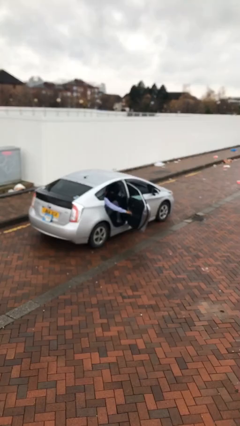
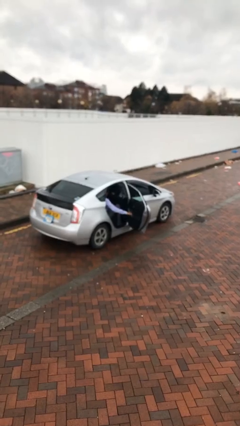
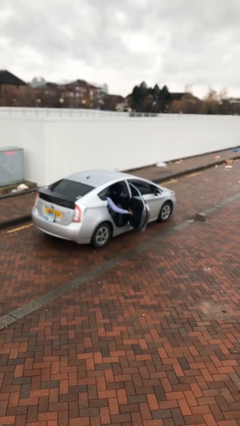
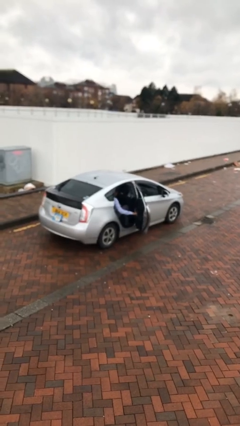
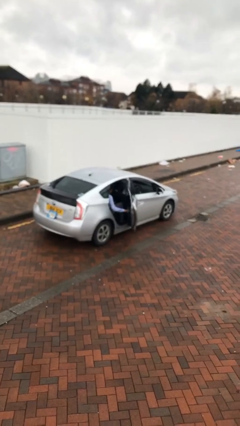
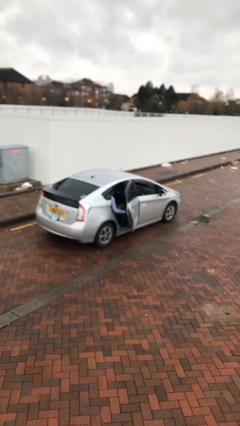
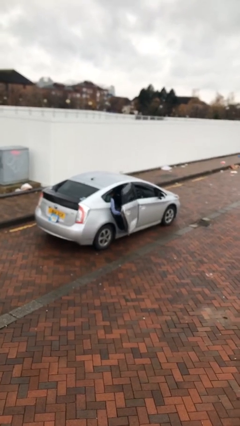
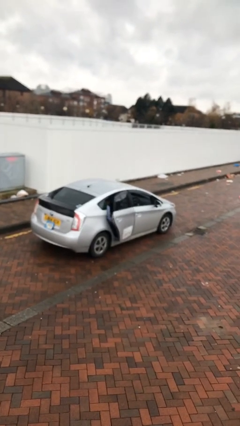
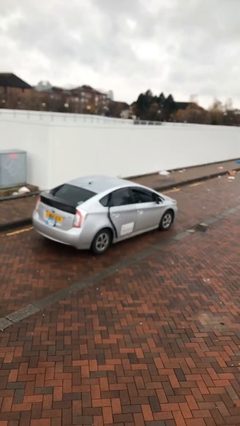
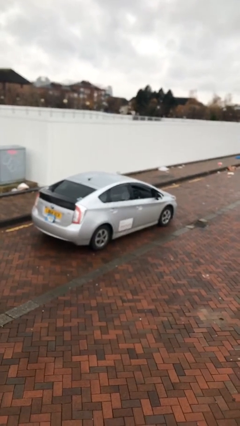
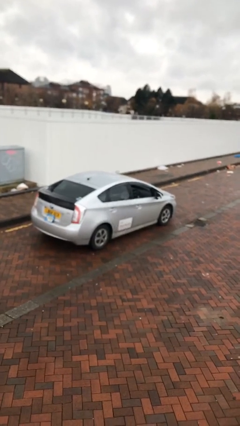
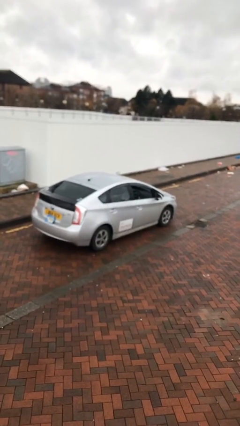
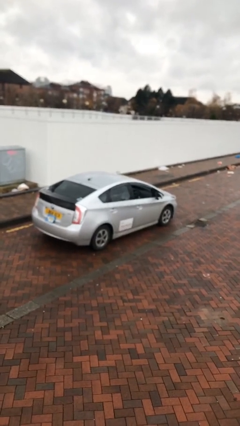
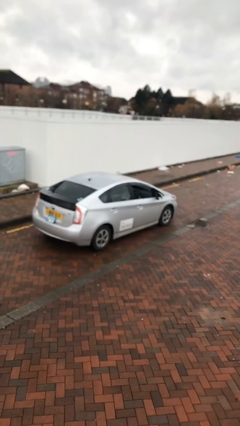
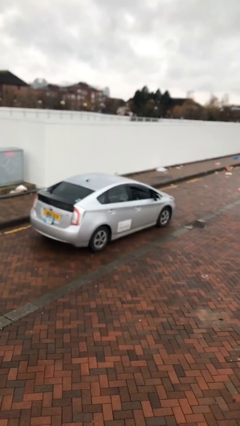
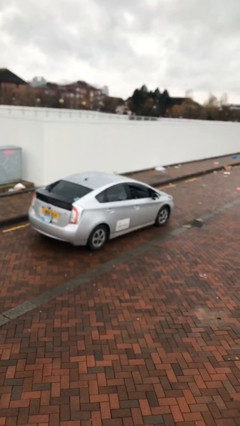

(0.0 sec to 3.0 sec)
person closes car door

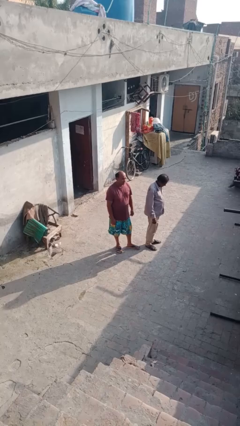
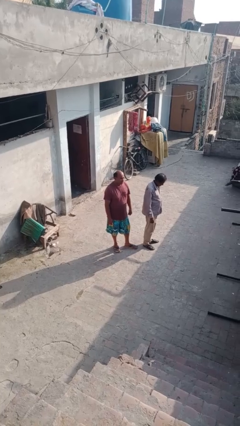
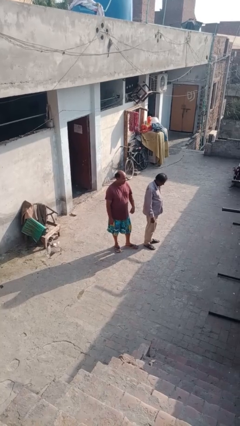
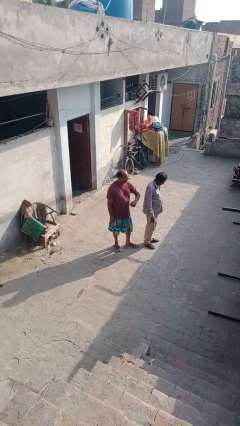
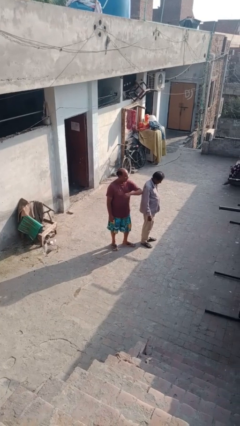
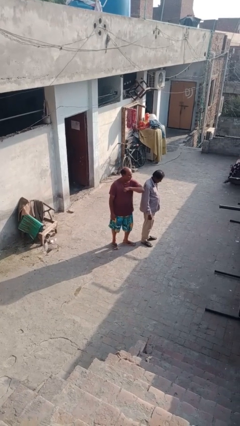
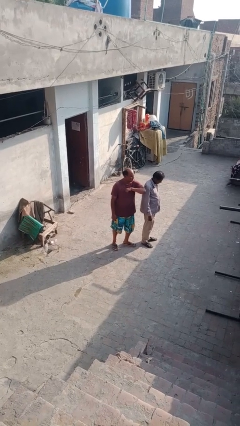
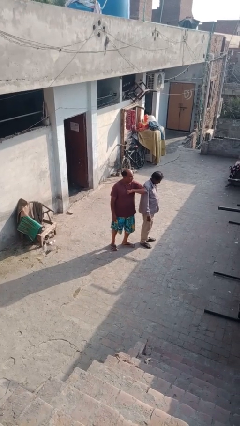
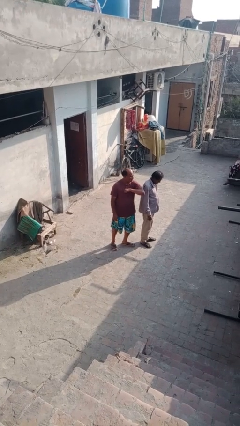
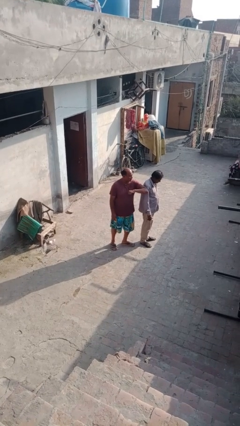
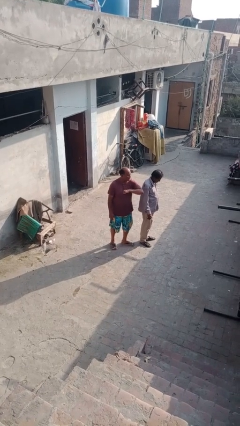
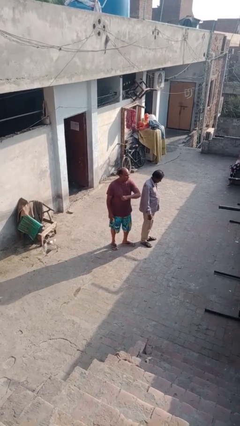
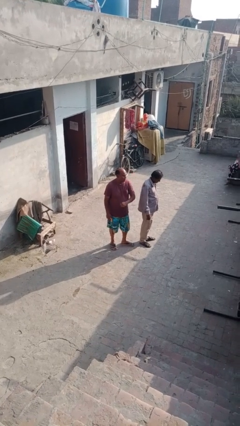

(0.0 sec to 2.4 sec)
person nudges person with elbow

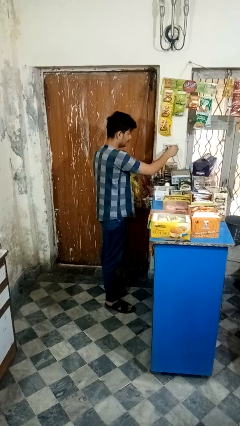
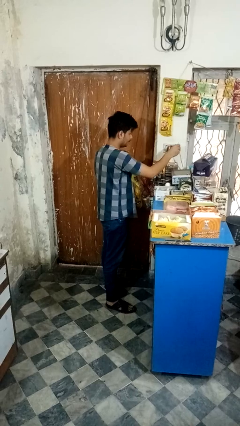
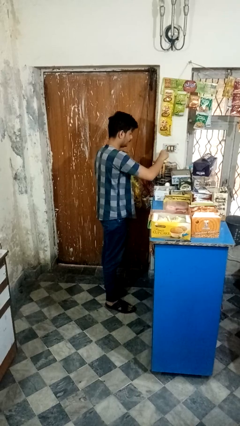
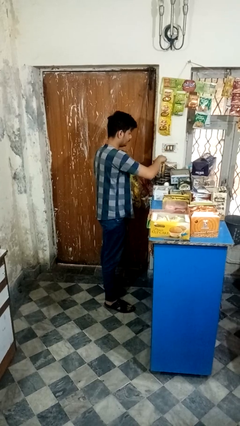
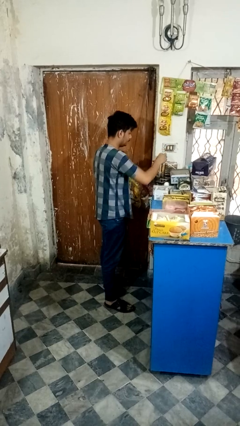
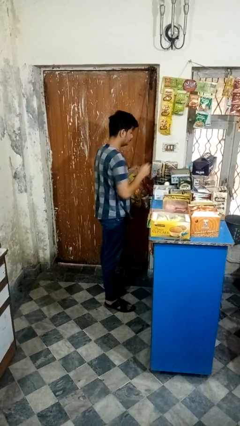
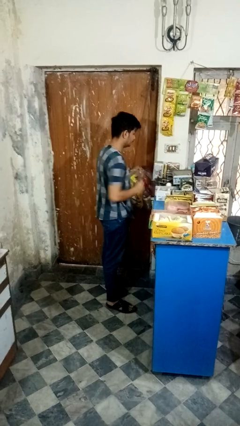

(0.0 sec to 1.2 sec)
person unplugs from electrical socket

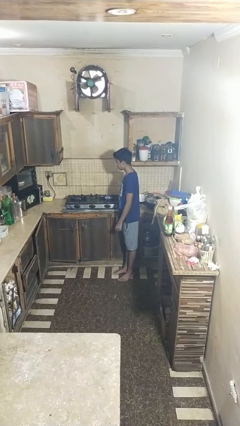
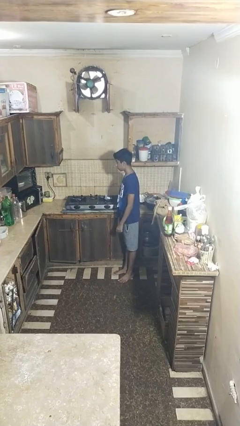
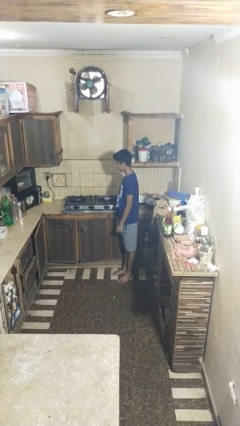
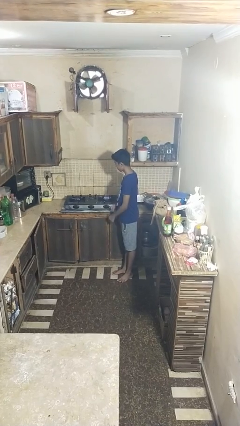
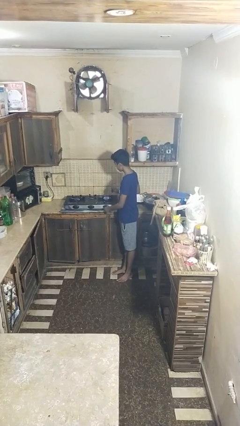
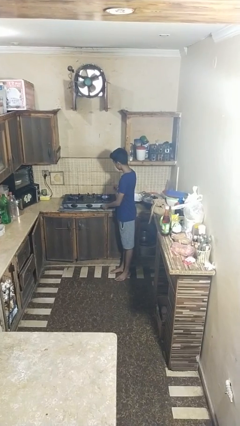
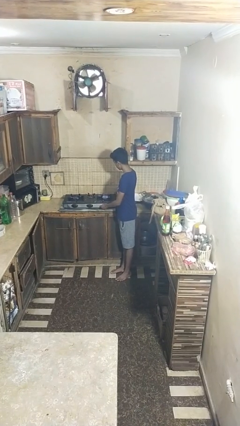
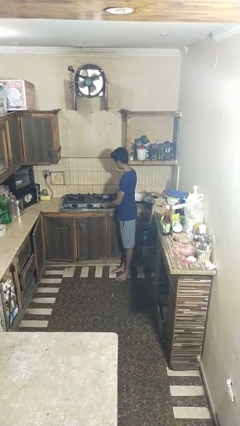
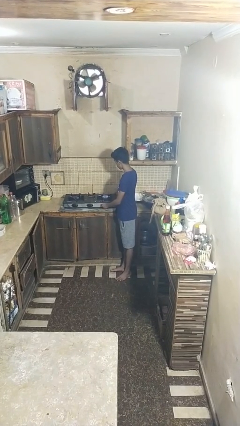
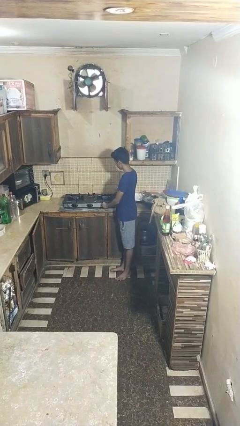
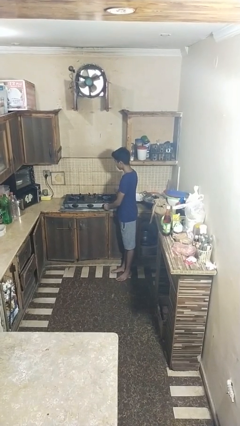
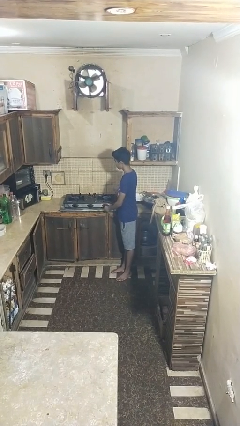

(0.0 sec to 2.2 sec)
person turns off stovetop

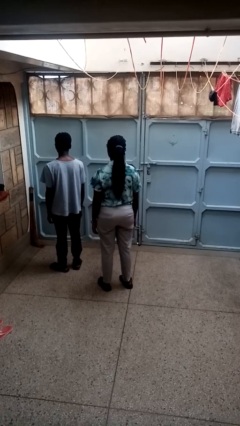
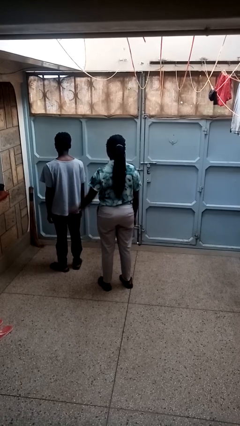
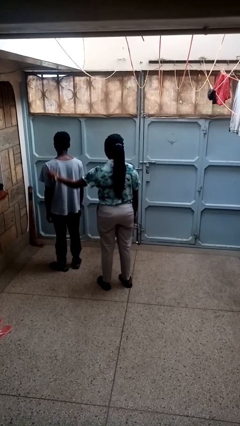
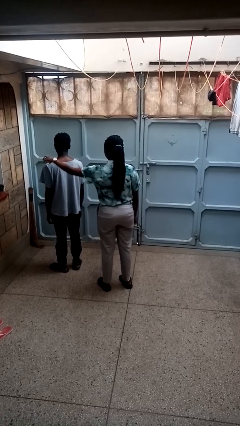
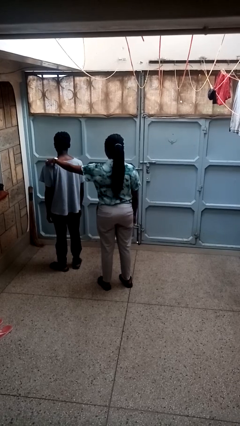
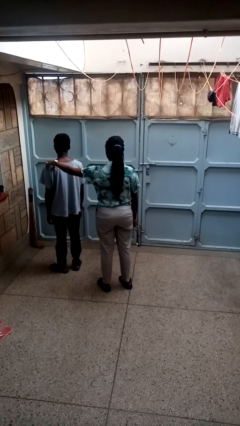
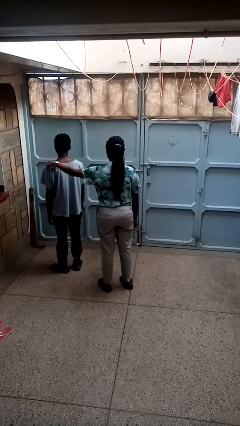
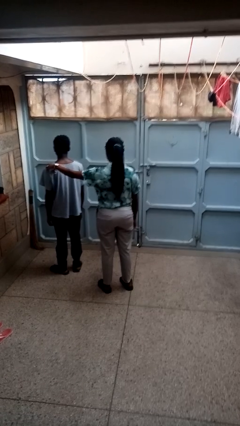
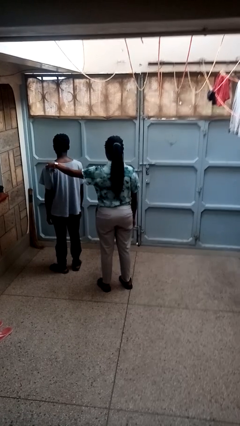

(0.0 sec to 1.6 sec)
person grabs person by shoulder

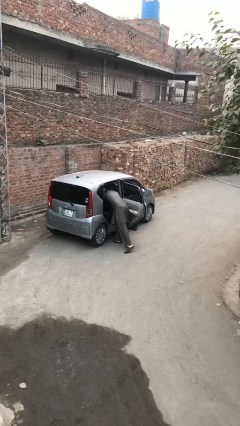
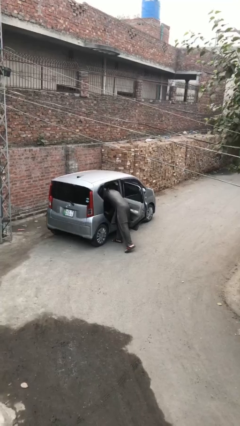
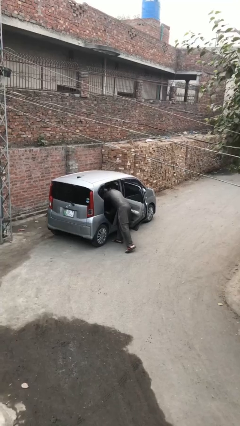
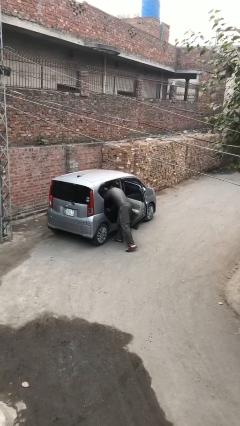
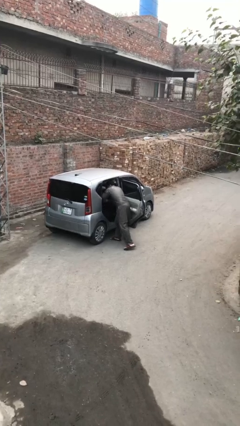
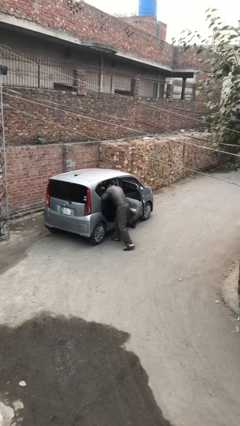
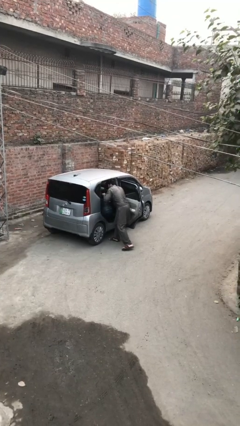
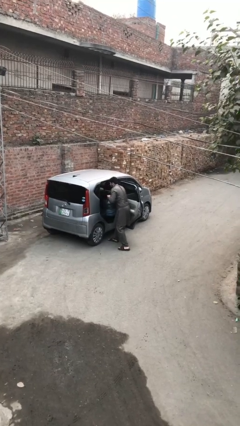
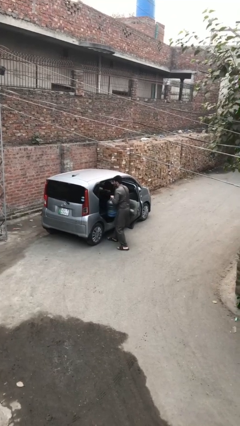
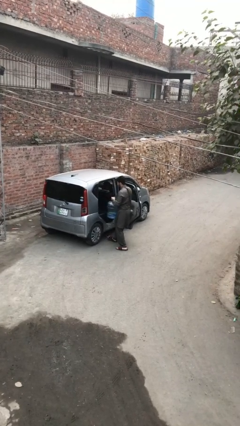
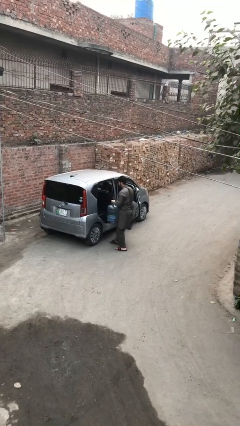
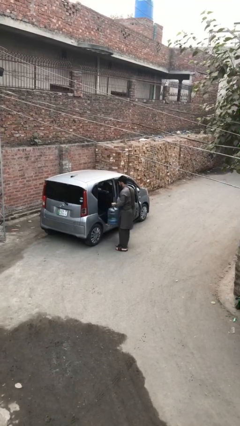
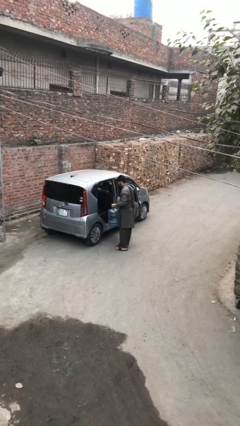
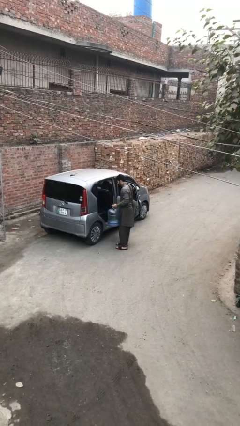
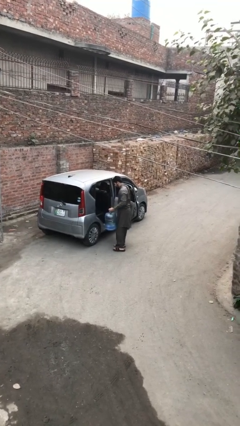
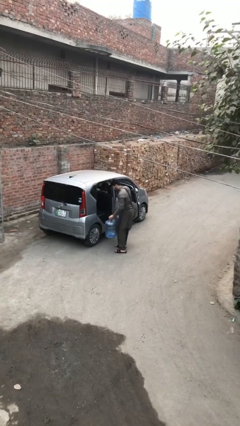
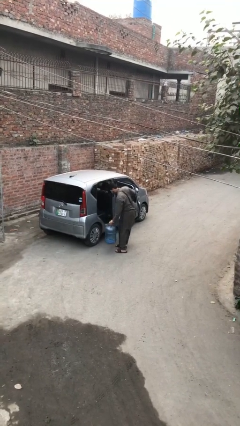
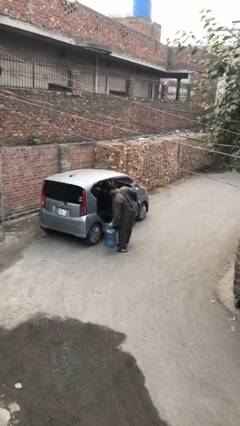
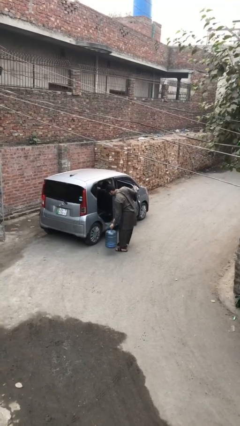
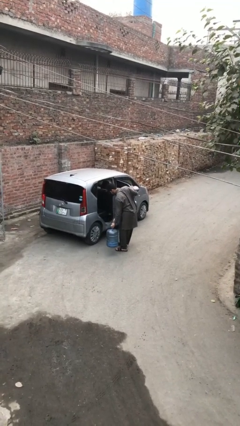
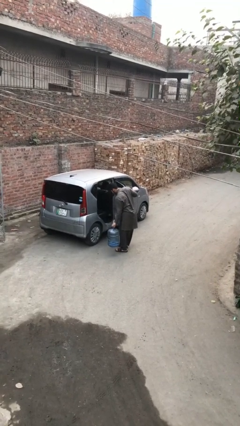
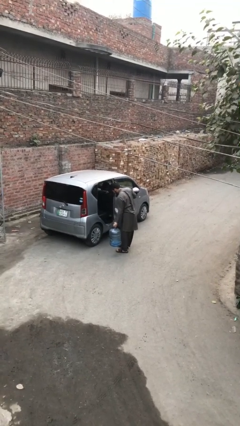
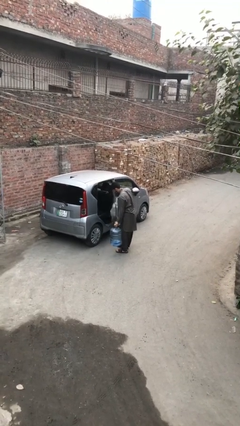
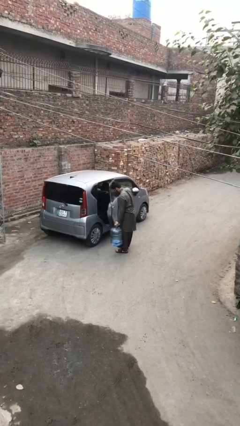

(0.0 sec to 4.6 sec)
person unloads car

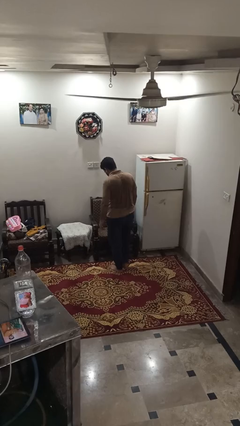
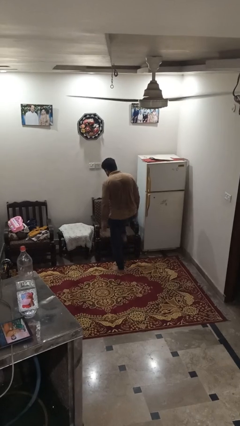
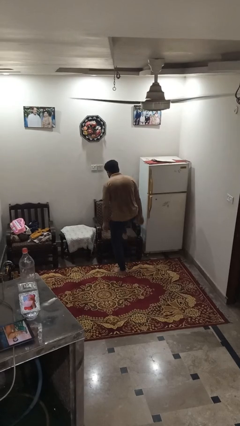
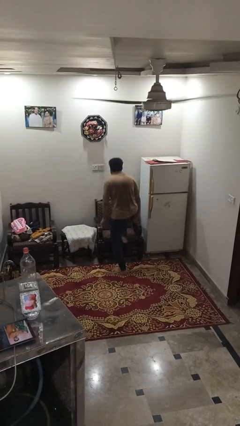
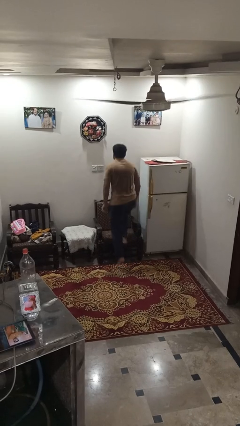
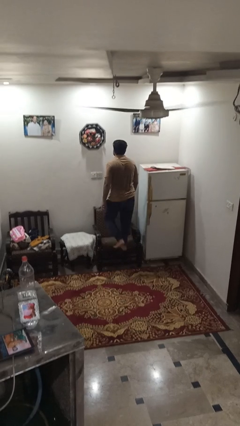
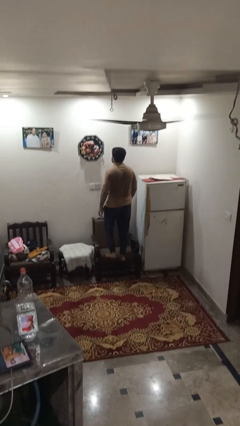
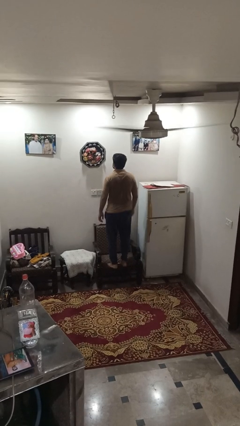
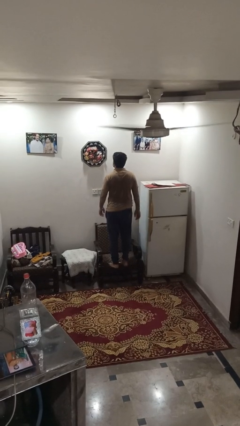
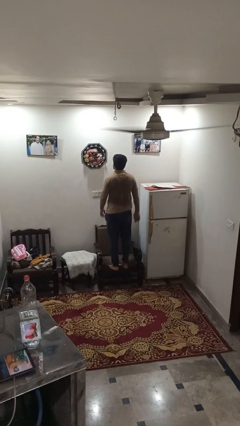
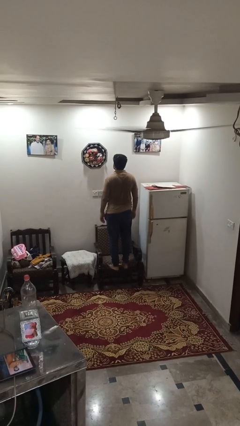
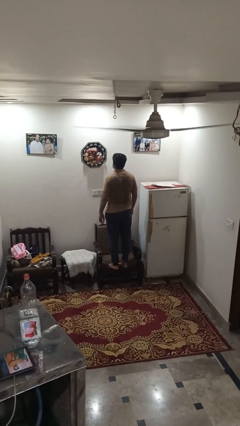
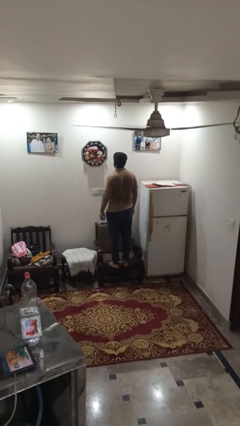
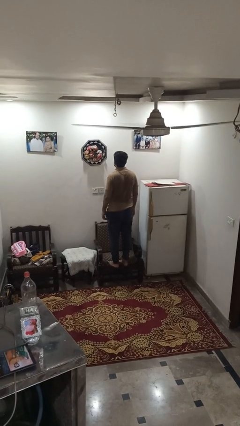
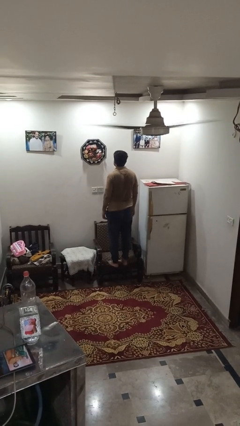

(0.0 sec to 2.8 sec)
person climbs on couch
